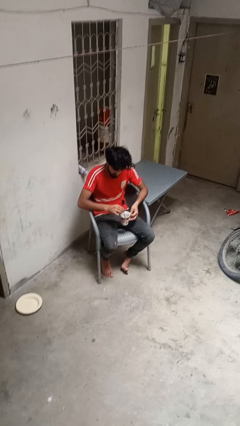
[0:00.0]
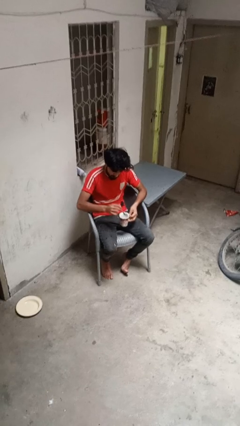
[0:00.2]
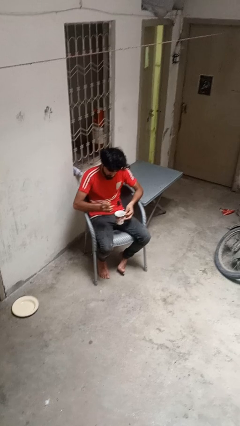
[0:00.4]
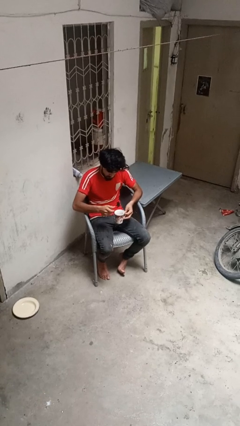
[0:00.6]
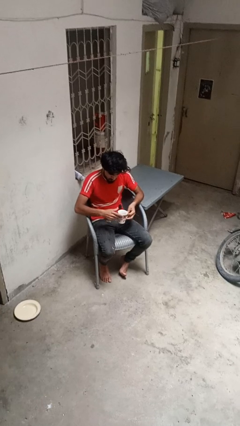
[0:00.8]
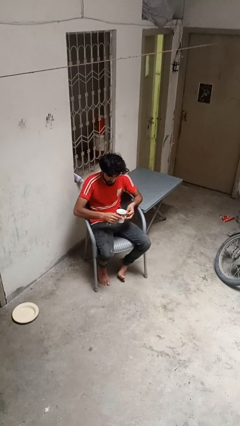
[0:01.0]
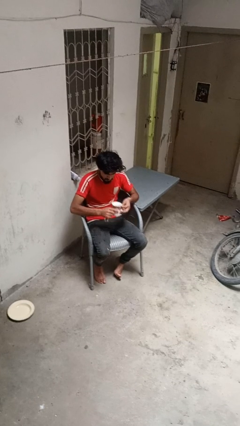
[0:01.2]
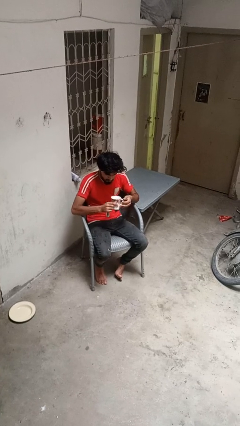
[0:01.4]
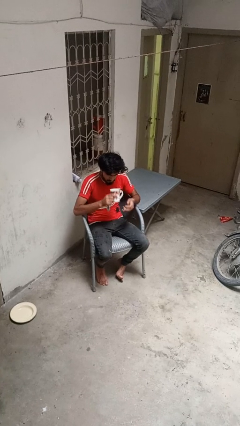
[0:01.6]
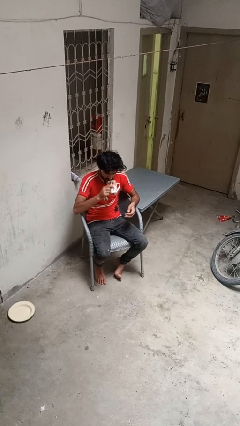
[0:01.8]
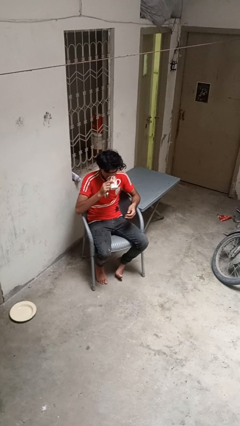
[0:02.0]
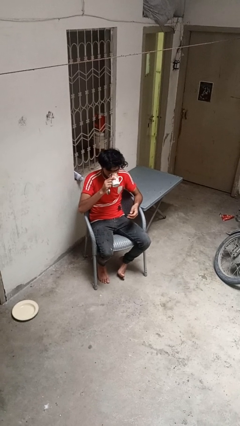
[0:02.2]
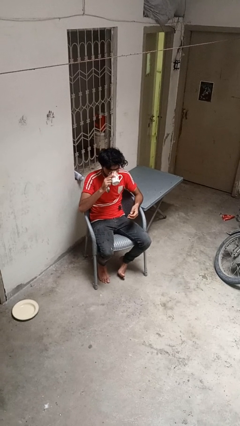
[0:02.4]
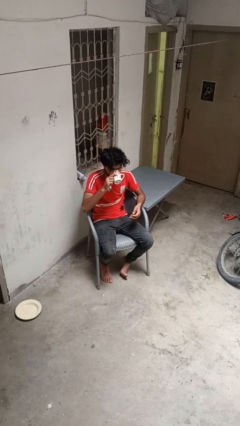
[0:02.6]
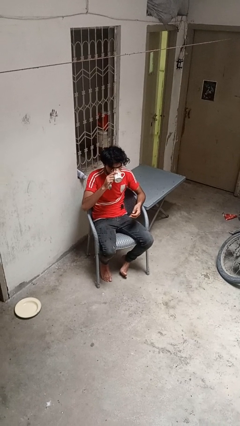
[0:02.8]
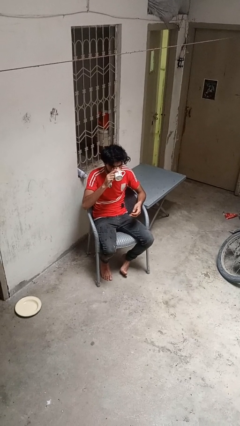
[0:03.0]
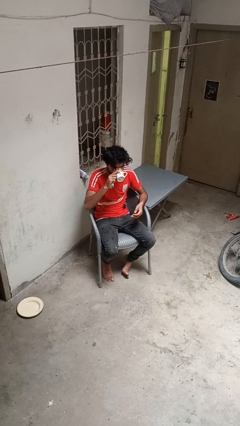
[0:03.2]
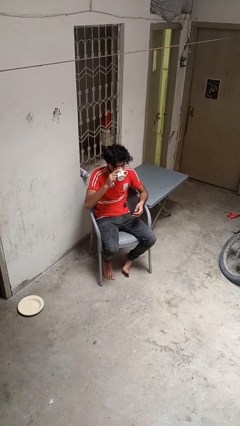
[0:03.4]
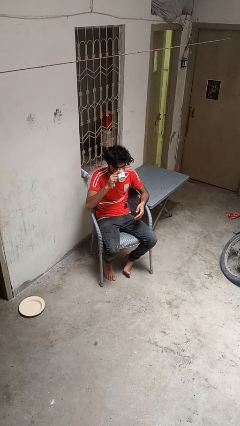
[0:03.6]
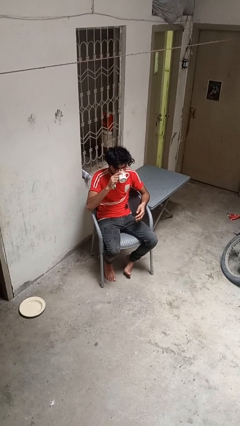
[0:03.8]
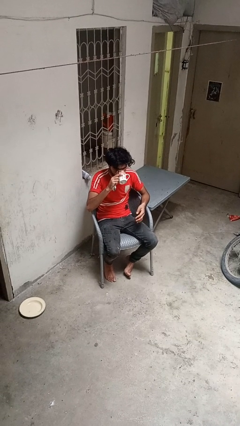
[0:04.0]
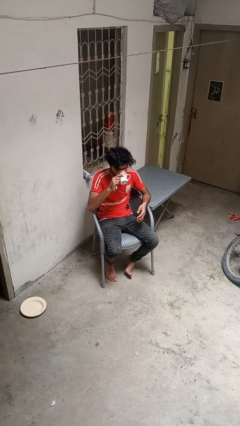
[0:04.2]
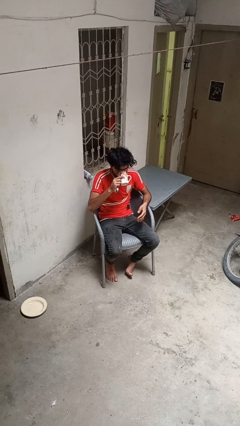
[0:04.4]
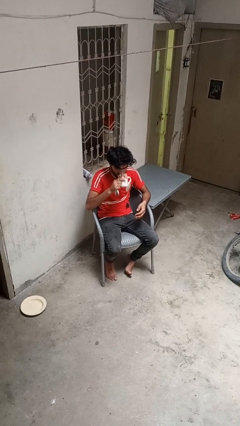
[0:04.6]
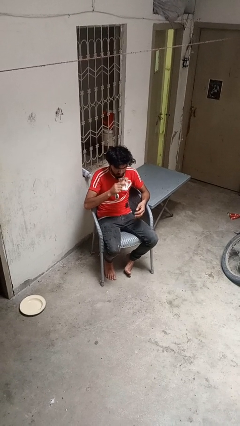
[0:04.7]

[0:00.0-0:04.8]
person drinks from mug

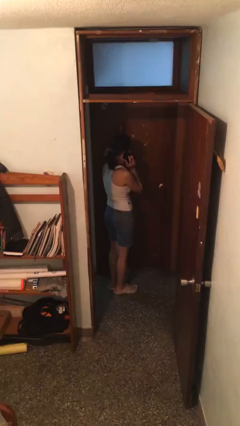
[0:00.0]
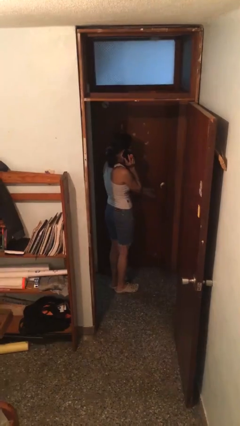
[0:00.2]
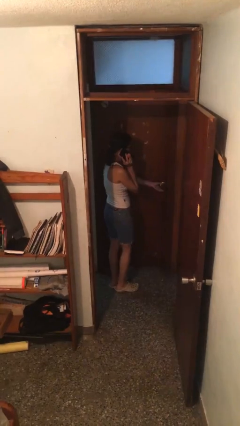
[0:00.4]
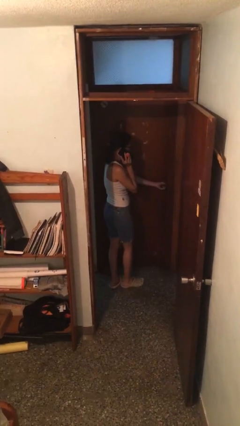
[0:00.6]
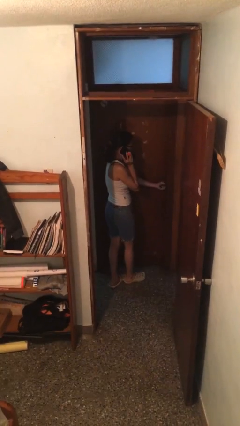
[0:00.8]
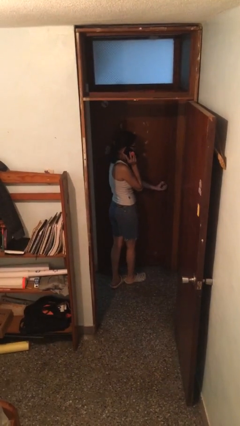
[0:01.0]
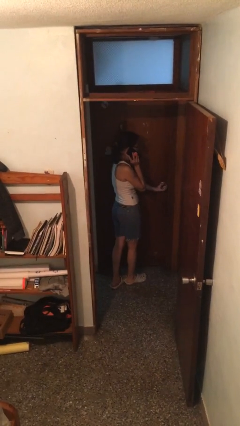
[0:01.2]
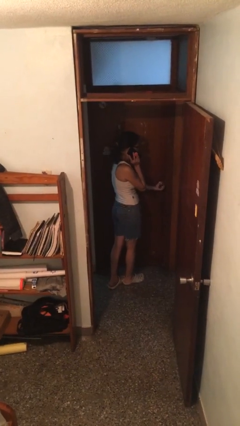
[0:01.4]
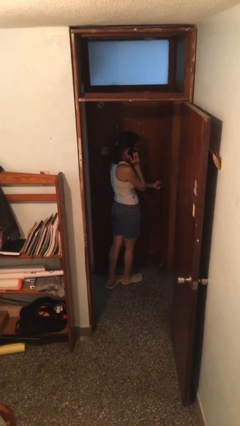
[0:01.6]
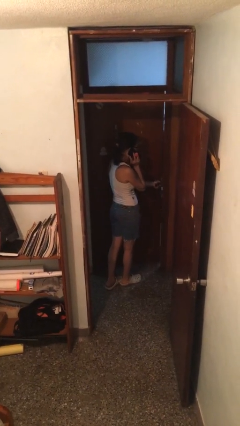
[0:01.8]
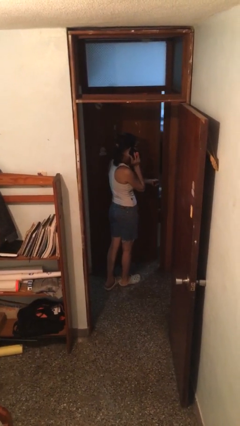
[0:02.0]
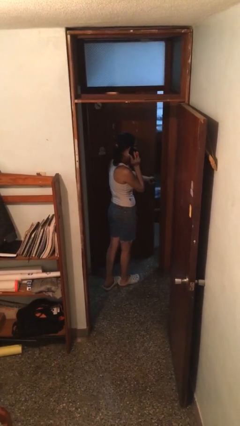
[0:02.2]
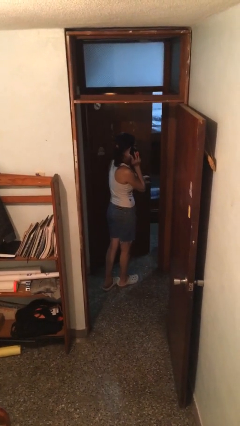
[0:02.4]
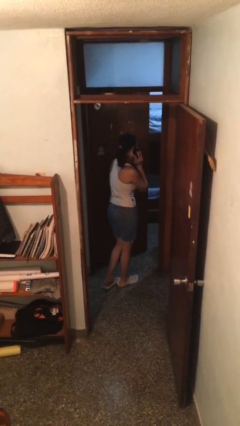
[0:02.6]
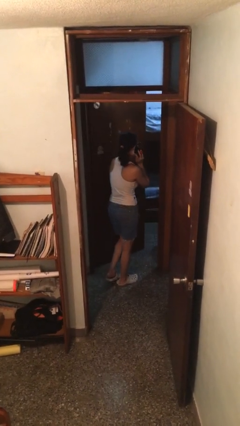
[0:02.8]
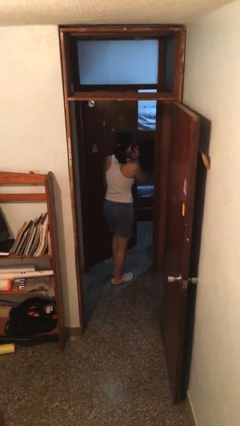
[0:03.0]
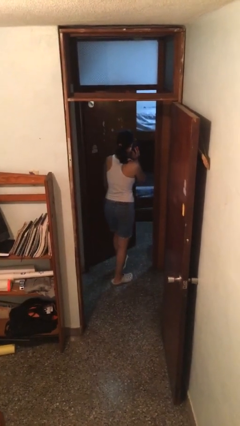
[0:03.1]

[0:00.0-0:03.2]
person opens facility door

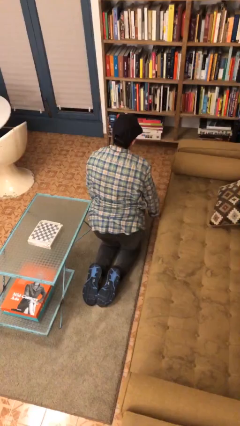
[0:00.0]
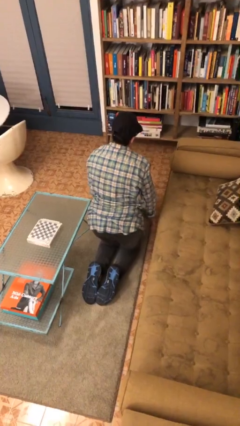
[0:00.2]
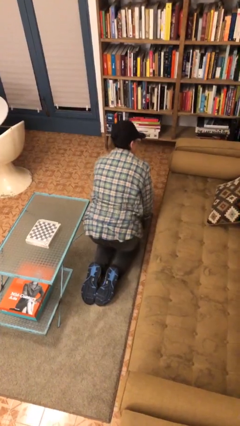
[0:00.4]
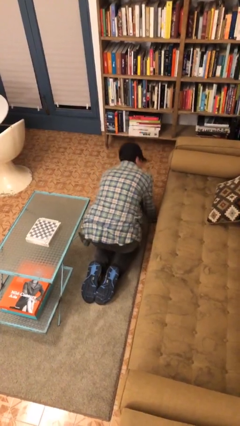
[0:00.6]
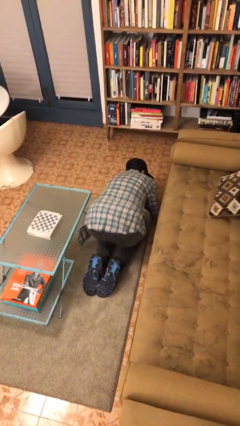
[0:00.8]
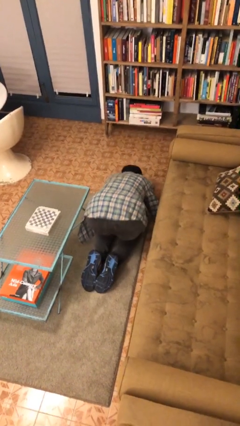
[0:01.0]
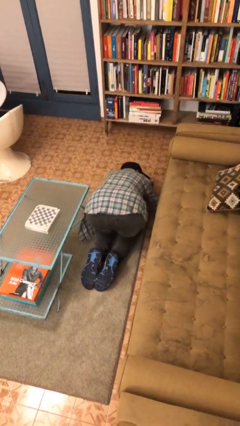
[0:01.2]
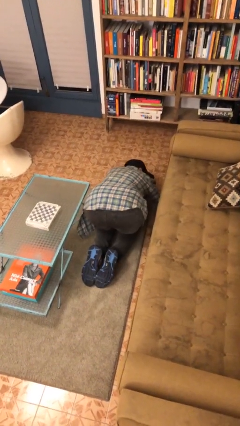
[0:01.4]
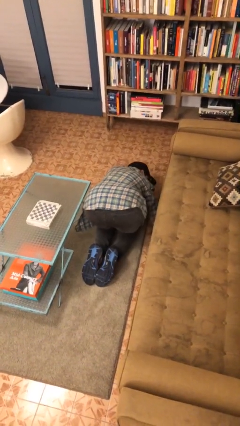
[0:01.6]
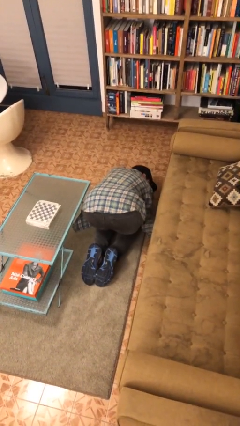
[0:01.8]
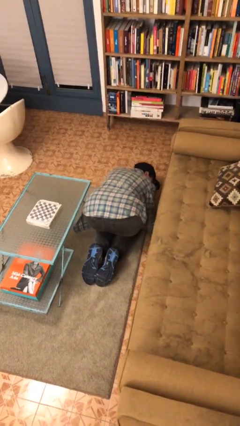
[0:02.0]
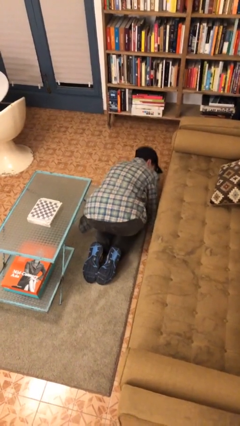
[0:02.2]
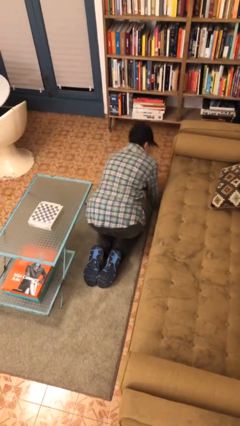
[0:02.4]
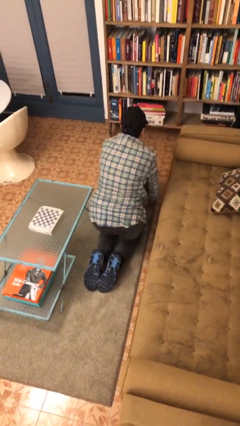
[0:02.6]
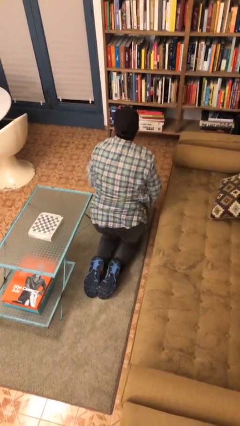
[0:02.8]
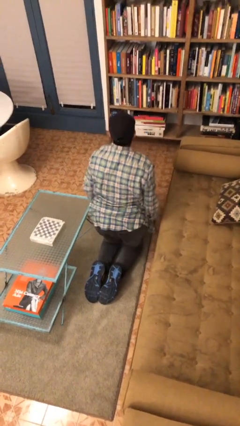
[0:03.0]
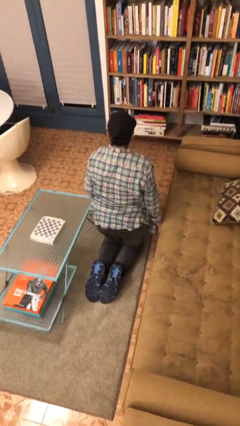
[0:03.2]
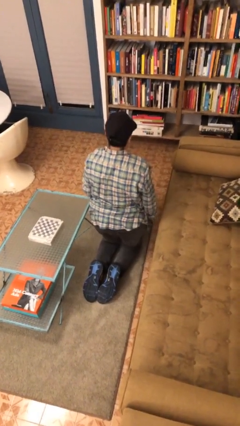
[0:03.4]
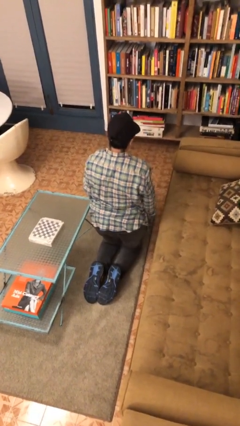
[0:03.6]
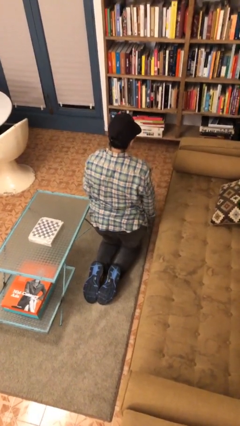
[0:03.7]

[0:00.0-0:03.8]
person searches under couch

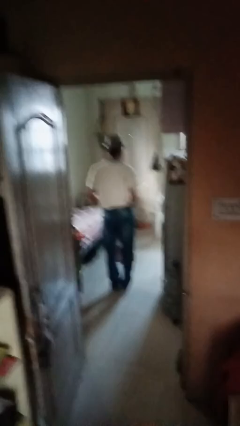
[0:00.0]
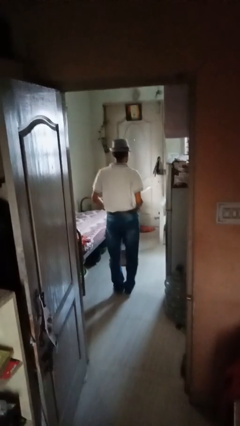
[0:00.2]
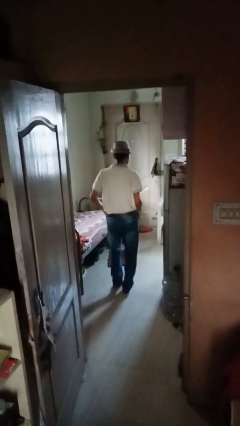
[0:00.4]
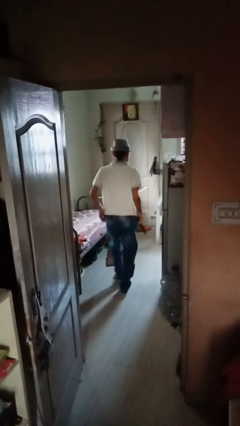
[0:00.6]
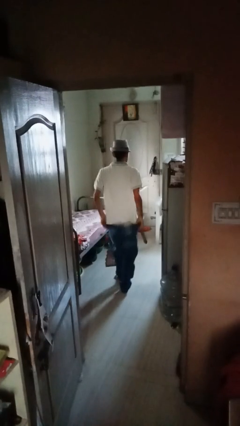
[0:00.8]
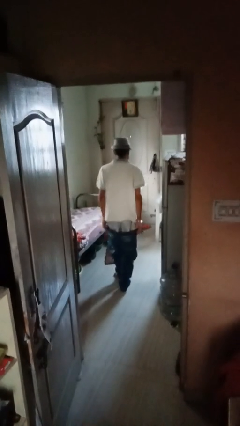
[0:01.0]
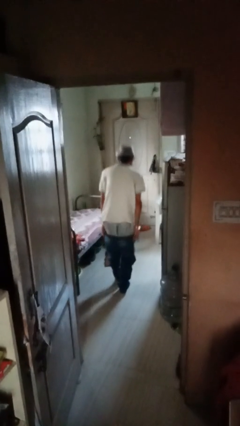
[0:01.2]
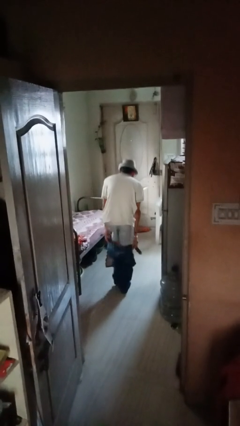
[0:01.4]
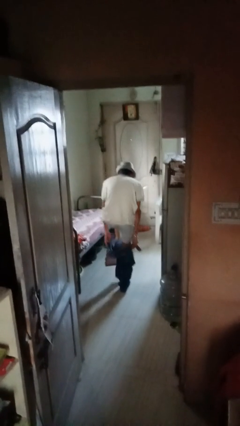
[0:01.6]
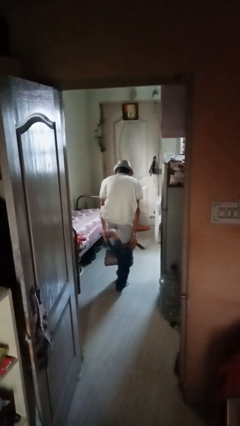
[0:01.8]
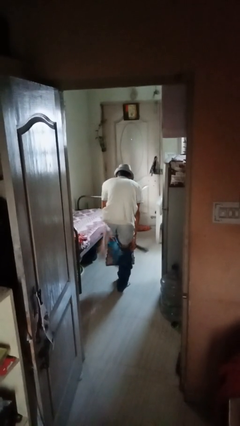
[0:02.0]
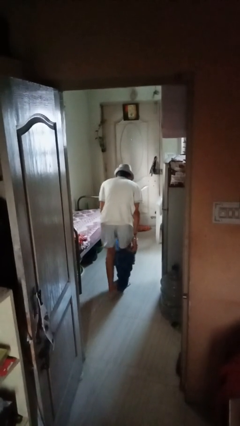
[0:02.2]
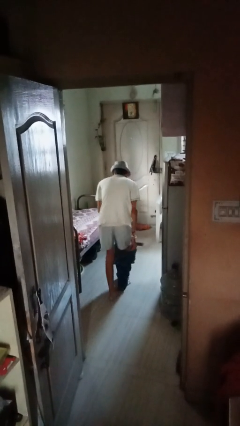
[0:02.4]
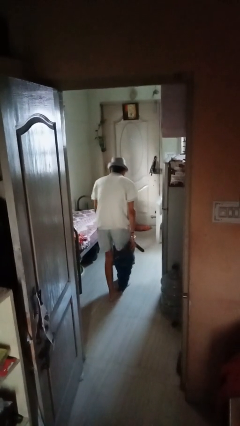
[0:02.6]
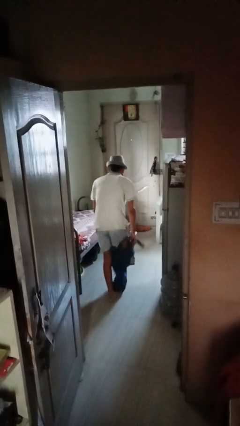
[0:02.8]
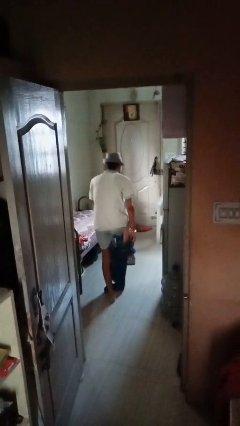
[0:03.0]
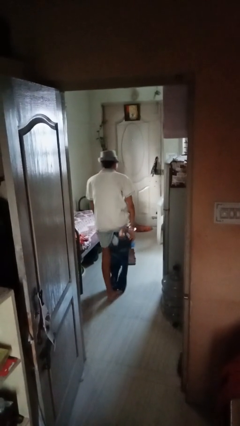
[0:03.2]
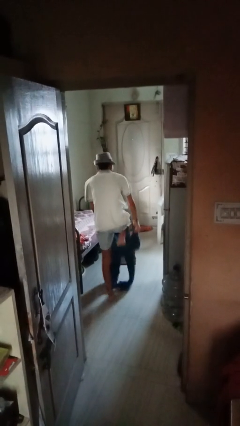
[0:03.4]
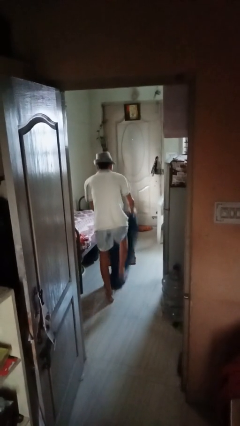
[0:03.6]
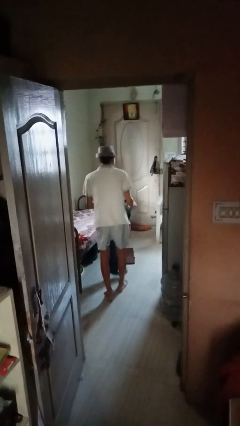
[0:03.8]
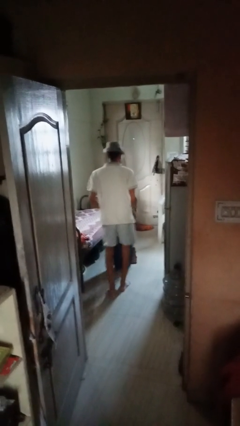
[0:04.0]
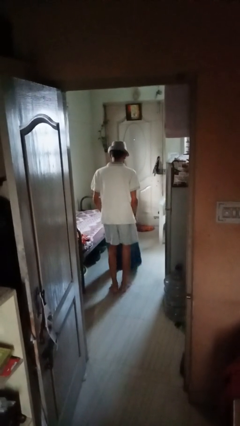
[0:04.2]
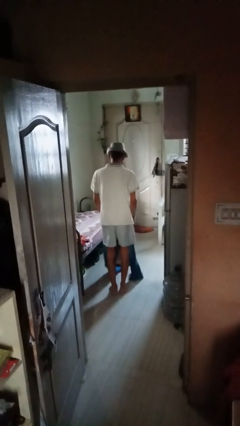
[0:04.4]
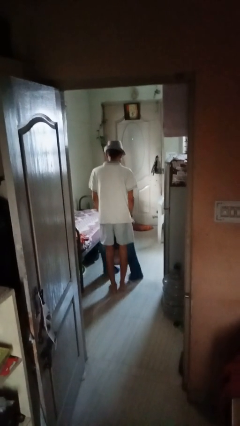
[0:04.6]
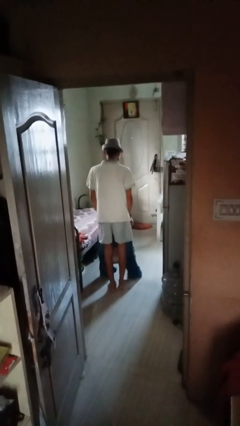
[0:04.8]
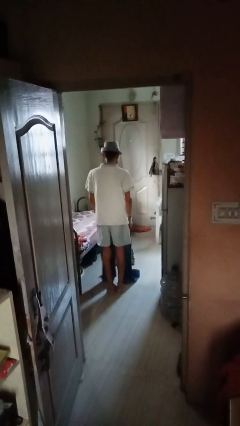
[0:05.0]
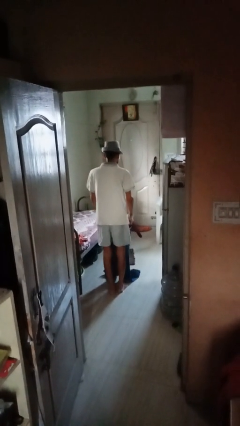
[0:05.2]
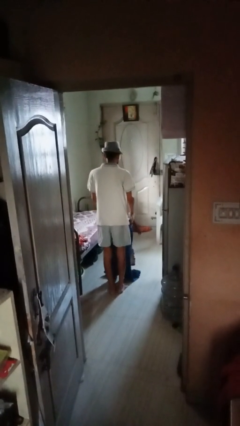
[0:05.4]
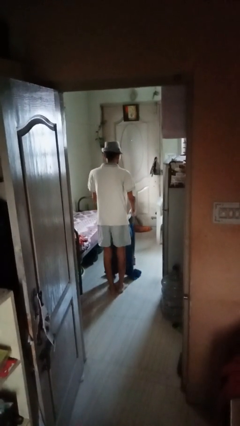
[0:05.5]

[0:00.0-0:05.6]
person takes off pants

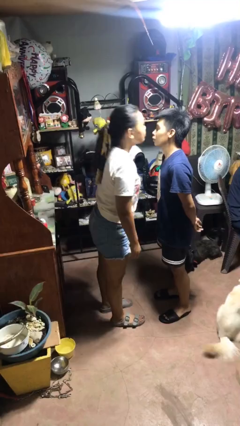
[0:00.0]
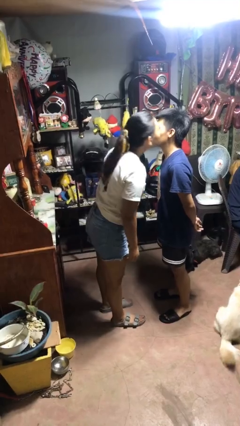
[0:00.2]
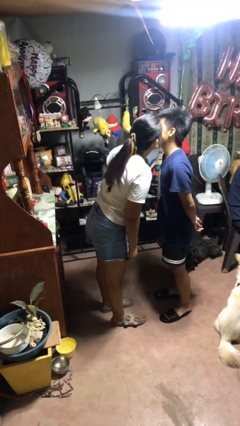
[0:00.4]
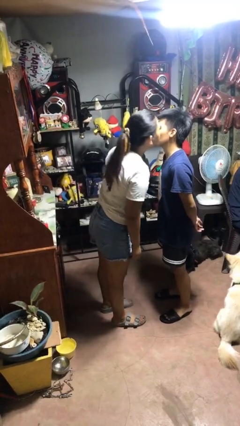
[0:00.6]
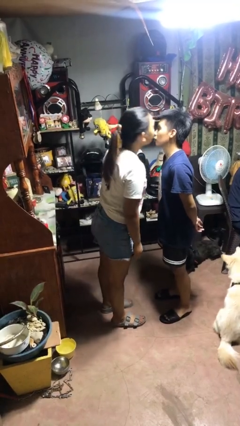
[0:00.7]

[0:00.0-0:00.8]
person kisses cheek of person
